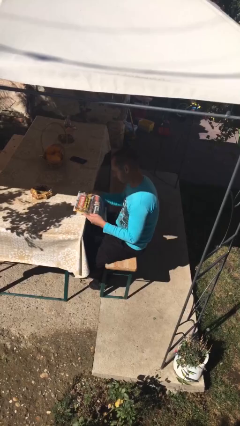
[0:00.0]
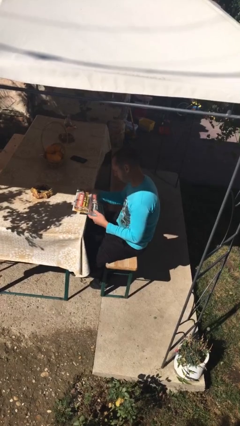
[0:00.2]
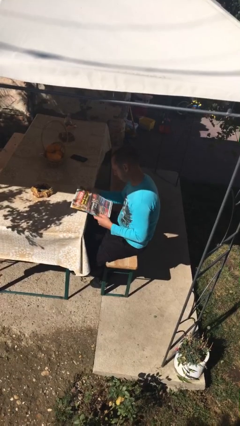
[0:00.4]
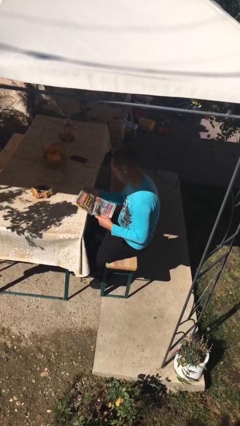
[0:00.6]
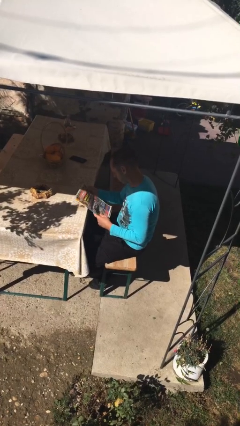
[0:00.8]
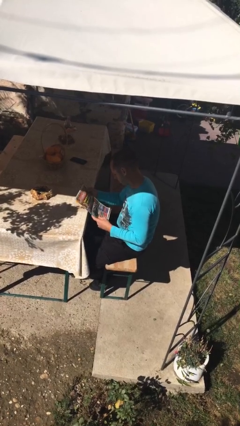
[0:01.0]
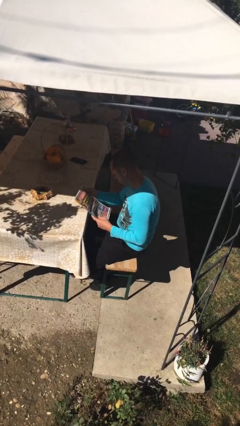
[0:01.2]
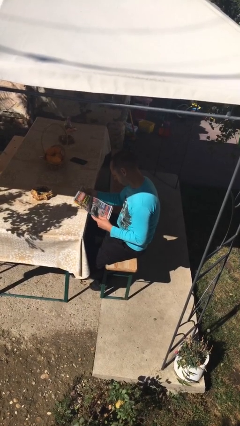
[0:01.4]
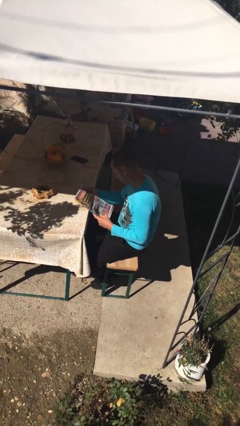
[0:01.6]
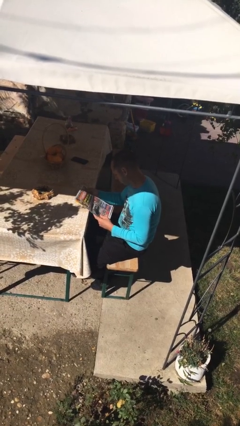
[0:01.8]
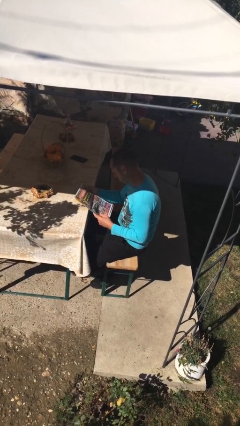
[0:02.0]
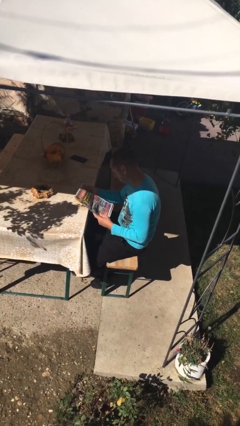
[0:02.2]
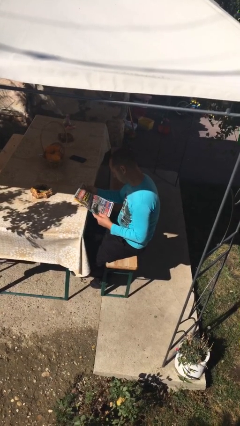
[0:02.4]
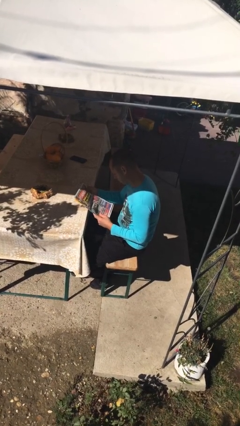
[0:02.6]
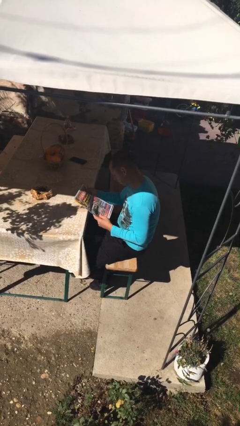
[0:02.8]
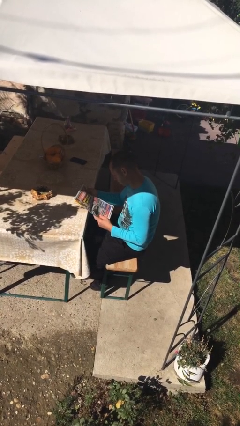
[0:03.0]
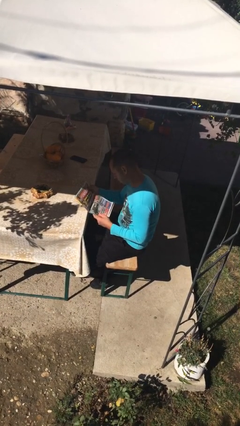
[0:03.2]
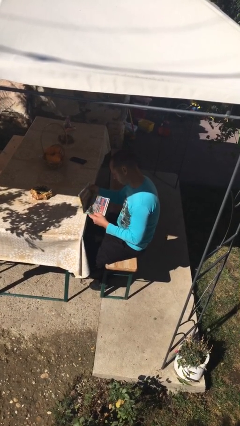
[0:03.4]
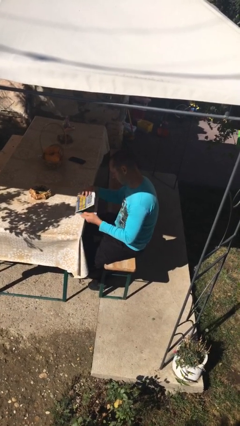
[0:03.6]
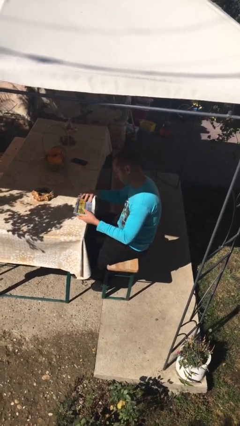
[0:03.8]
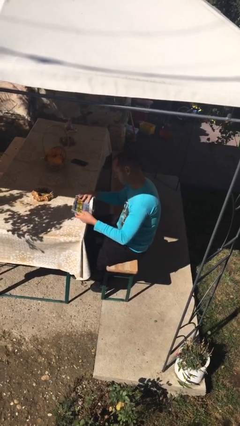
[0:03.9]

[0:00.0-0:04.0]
person reads document

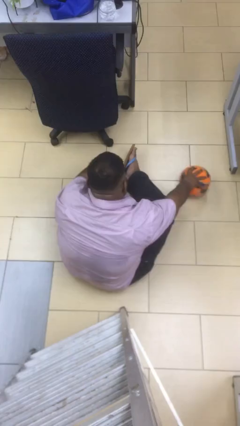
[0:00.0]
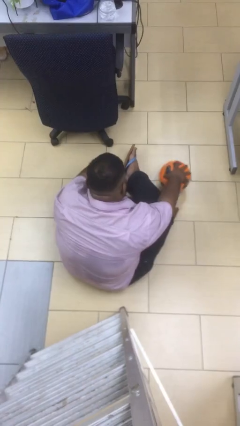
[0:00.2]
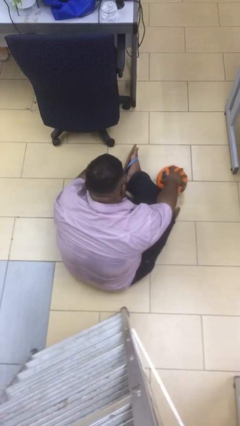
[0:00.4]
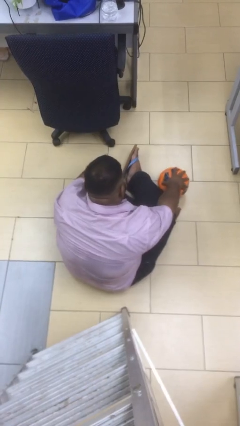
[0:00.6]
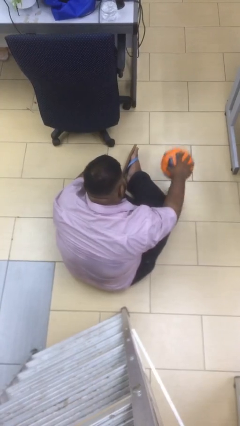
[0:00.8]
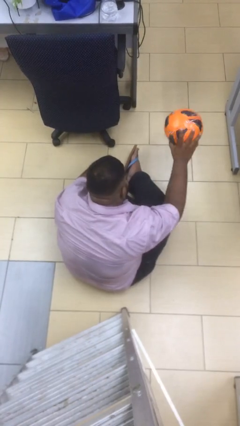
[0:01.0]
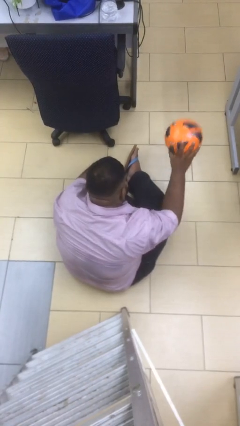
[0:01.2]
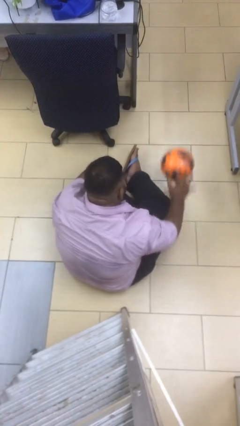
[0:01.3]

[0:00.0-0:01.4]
person bounces ball on floor

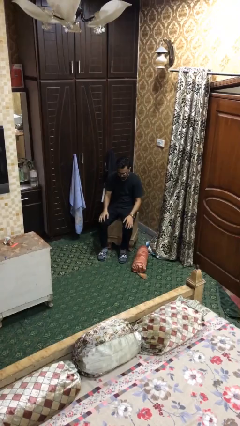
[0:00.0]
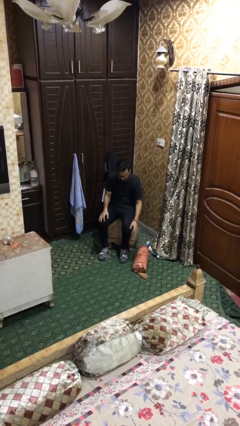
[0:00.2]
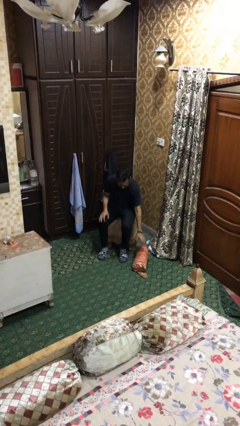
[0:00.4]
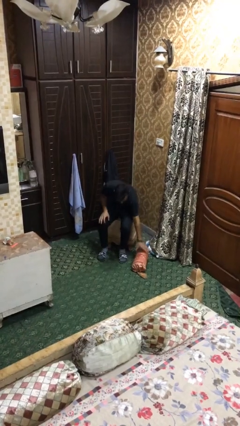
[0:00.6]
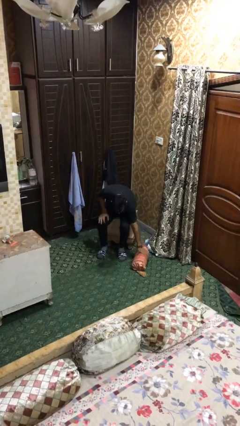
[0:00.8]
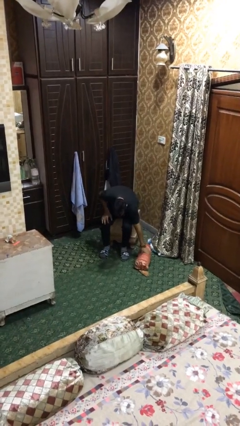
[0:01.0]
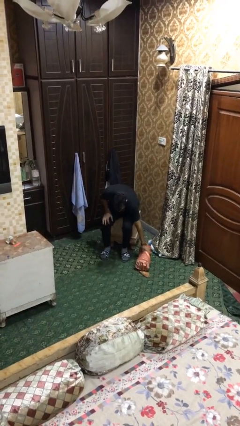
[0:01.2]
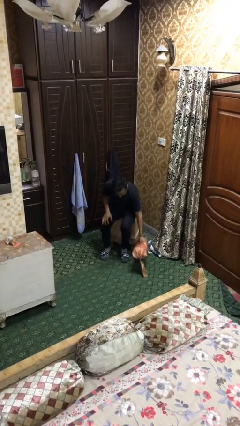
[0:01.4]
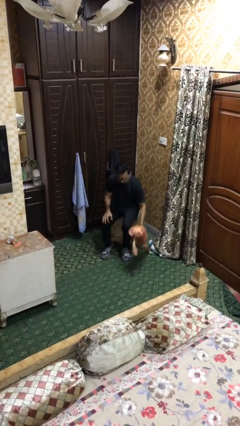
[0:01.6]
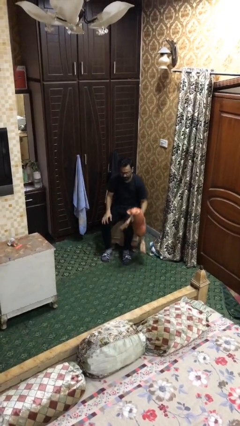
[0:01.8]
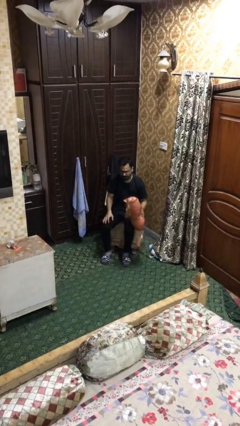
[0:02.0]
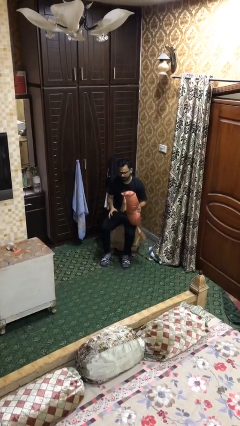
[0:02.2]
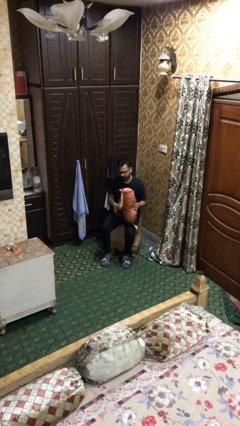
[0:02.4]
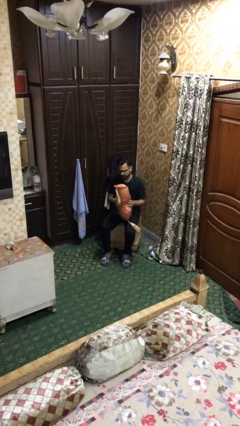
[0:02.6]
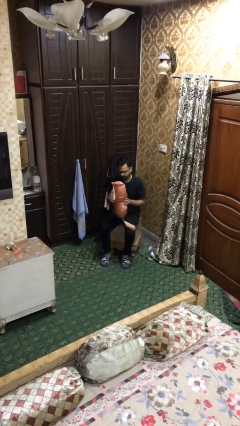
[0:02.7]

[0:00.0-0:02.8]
person picks up object from floor

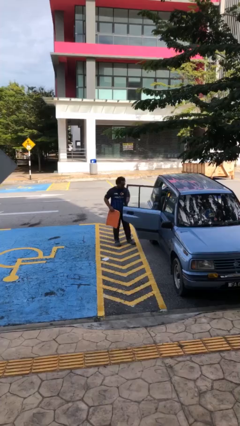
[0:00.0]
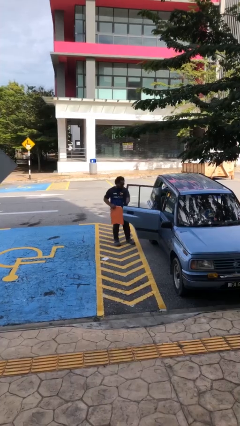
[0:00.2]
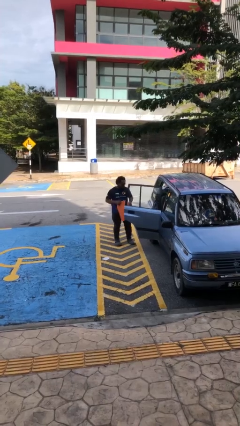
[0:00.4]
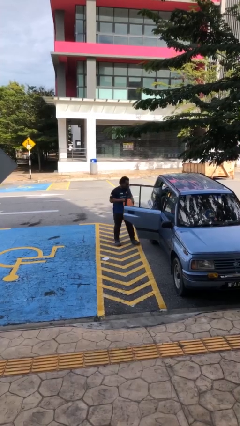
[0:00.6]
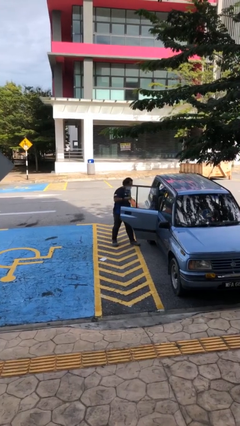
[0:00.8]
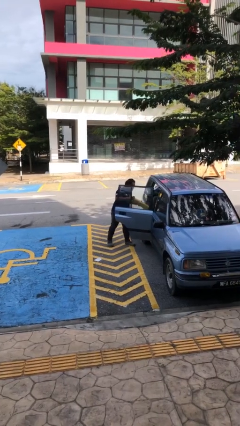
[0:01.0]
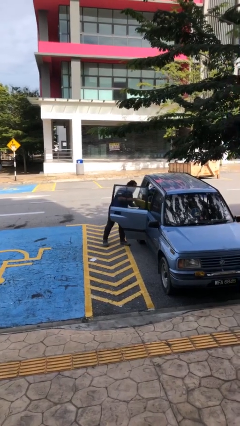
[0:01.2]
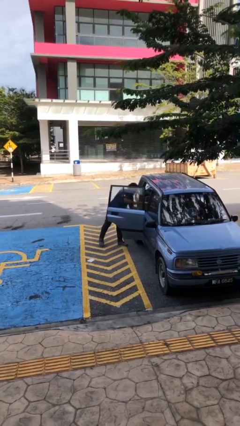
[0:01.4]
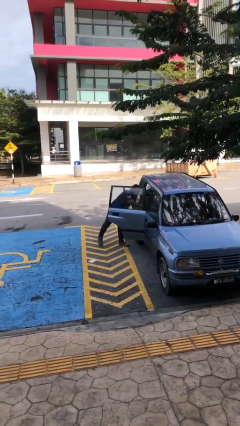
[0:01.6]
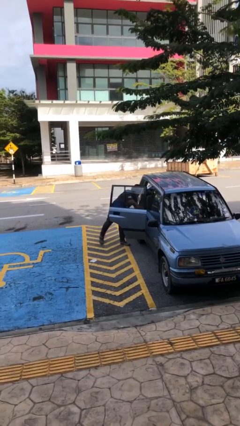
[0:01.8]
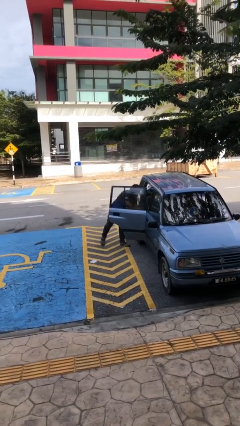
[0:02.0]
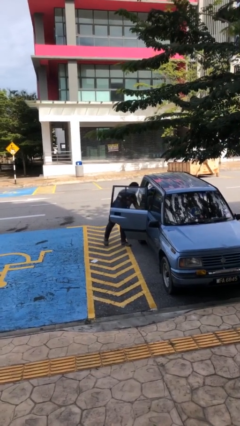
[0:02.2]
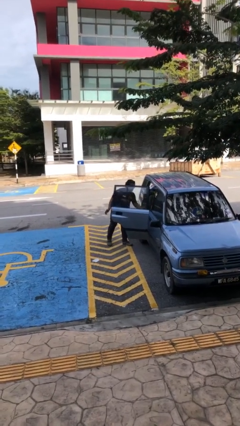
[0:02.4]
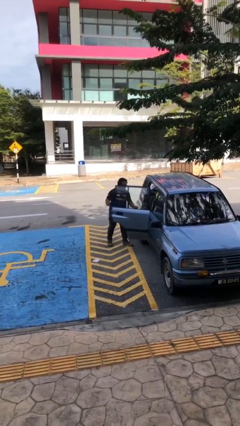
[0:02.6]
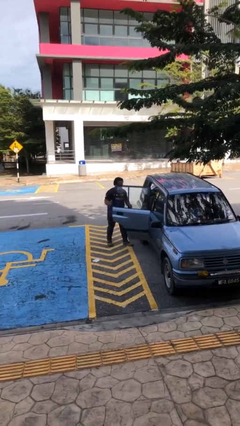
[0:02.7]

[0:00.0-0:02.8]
person loads car

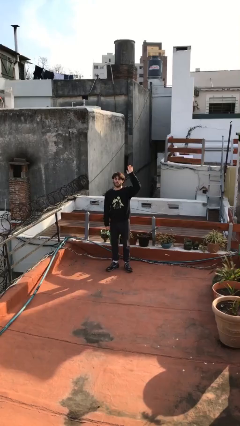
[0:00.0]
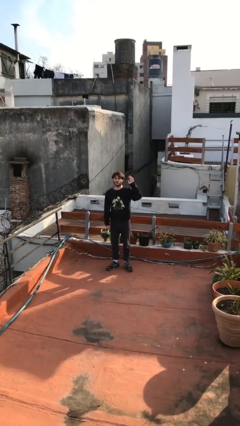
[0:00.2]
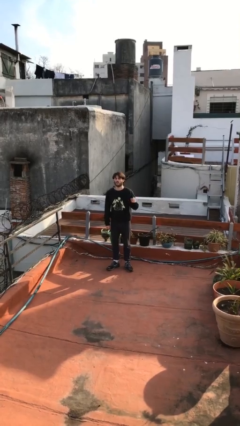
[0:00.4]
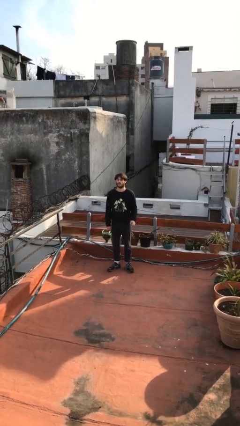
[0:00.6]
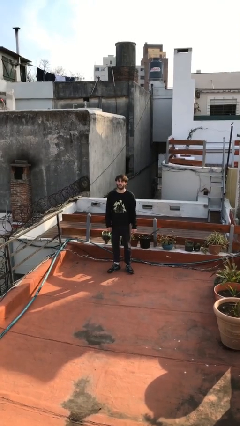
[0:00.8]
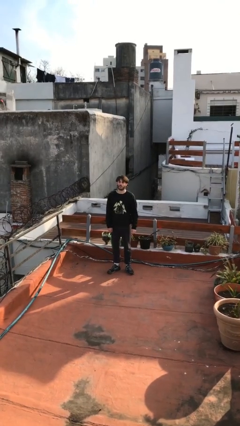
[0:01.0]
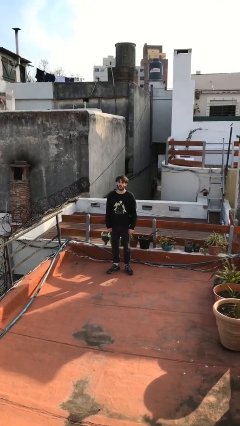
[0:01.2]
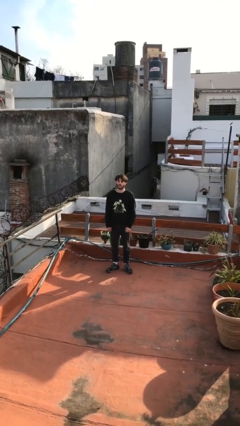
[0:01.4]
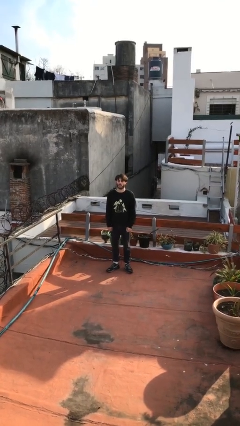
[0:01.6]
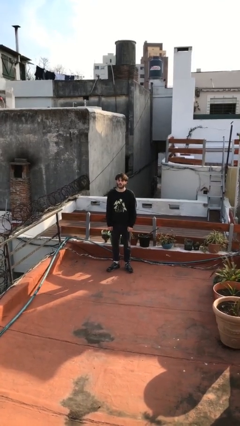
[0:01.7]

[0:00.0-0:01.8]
person gestures lower hand

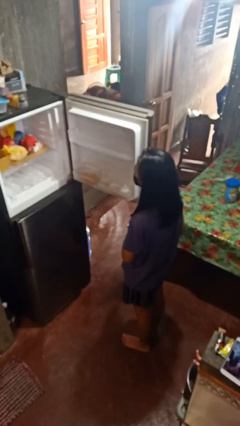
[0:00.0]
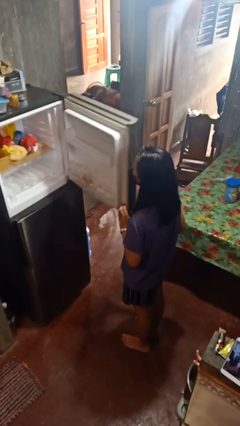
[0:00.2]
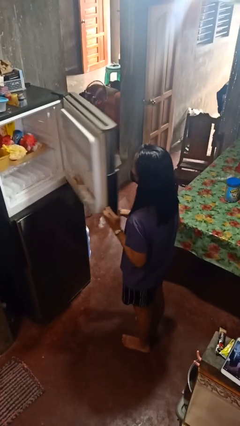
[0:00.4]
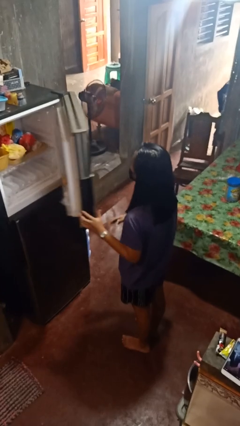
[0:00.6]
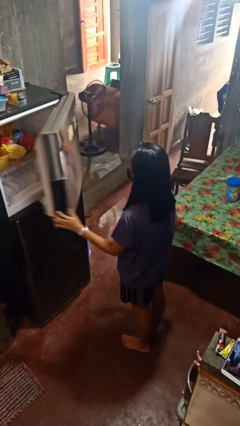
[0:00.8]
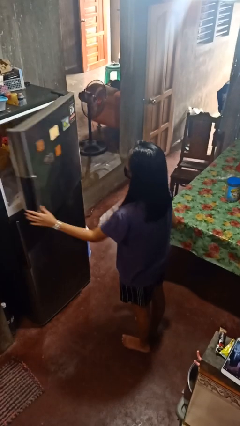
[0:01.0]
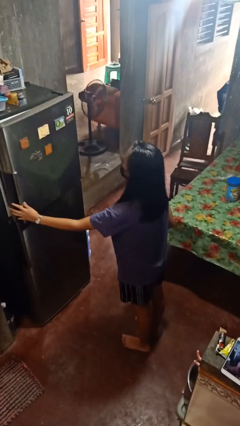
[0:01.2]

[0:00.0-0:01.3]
person closes refrigerator

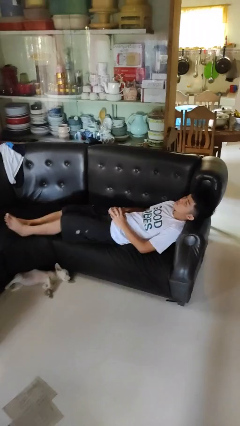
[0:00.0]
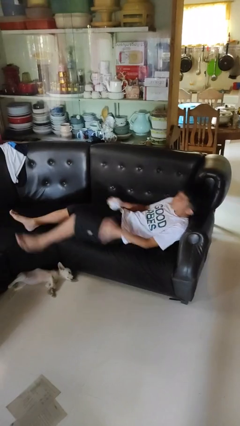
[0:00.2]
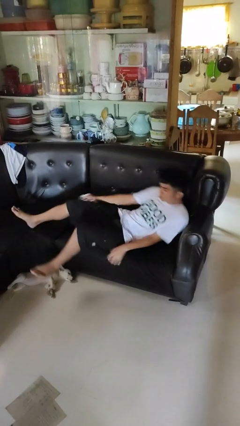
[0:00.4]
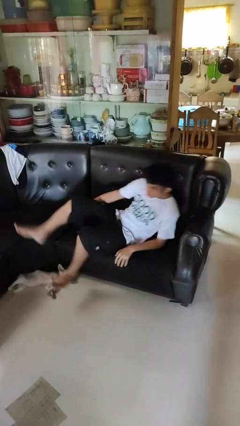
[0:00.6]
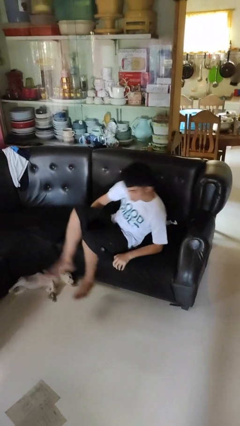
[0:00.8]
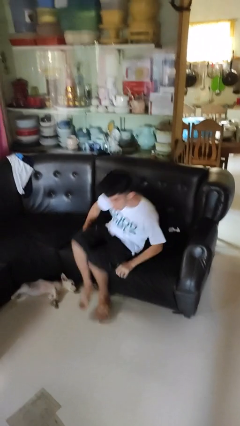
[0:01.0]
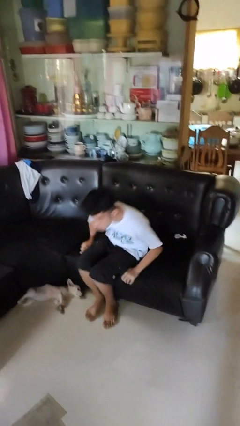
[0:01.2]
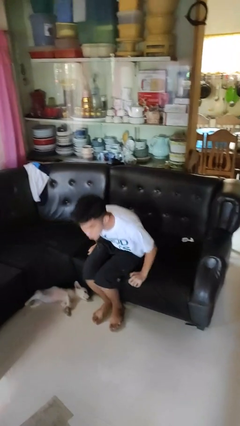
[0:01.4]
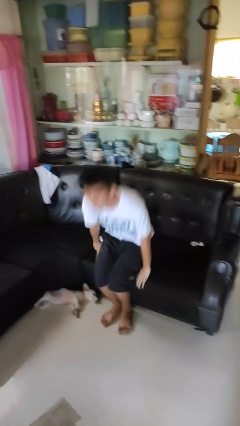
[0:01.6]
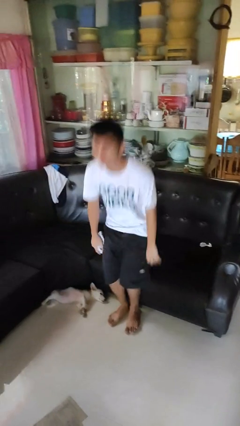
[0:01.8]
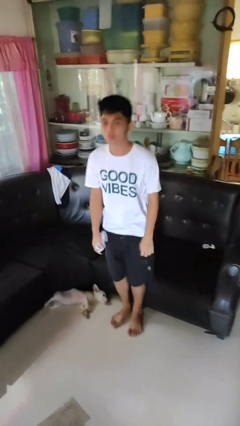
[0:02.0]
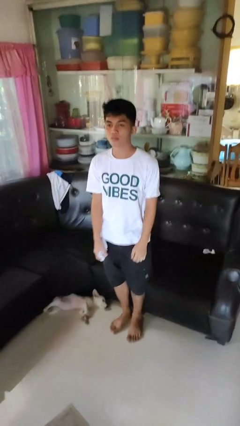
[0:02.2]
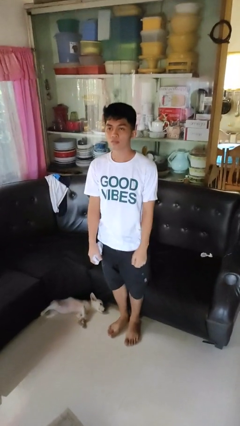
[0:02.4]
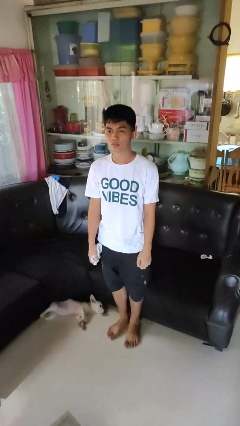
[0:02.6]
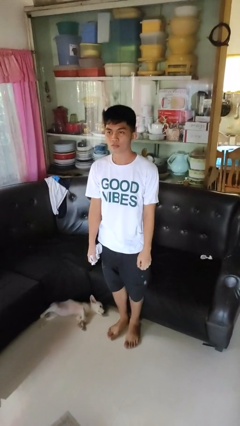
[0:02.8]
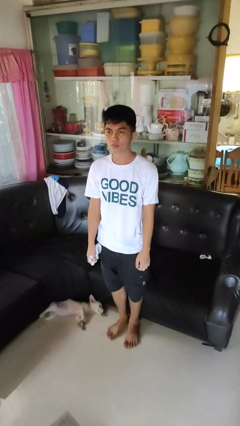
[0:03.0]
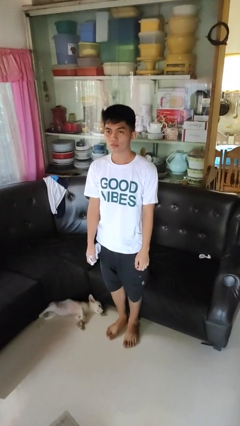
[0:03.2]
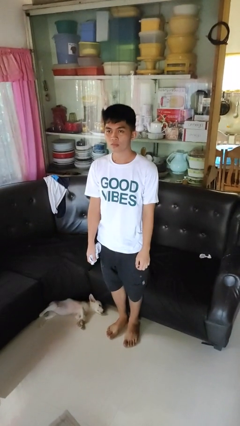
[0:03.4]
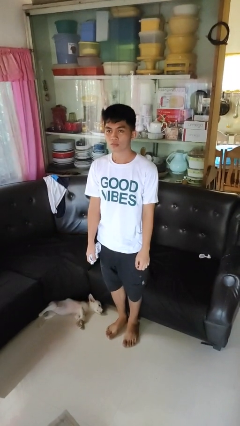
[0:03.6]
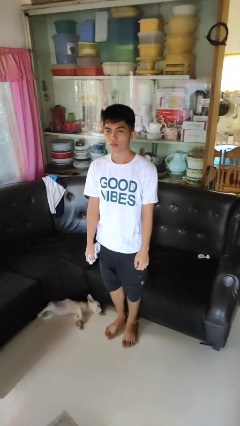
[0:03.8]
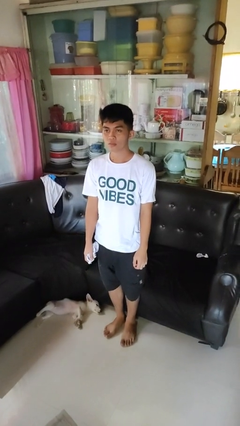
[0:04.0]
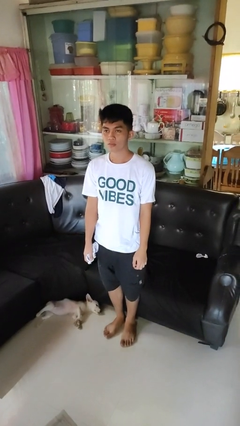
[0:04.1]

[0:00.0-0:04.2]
person stands up
